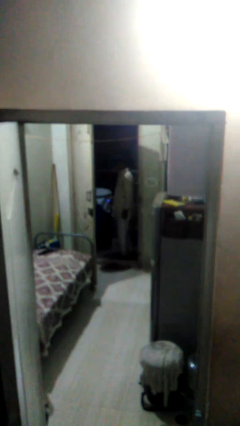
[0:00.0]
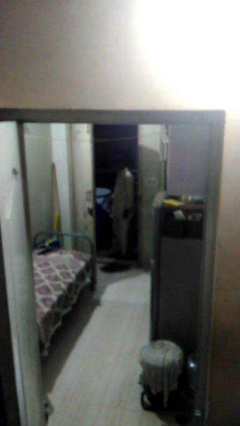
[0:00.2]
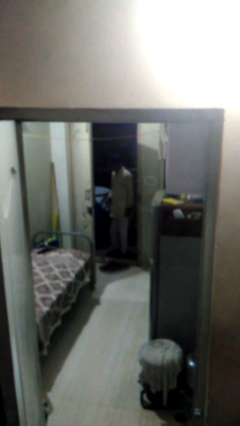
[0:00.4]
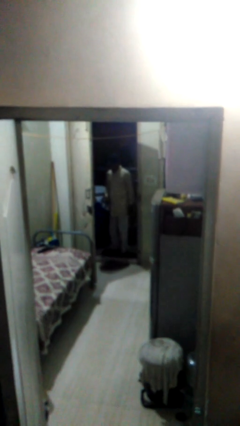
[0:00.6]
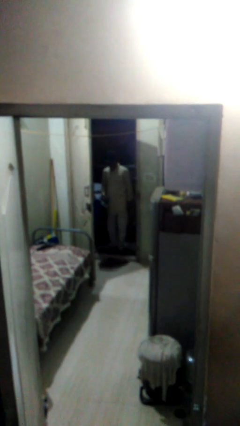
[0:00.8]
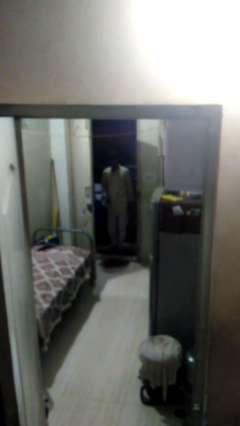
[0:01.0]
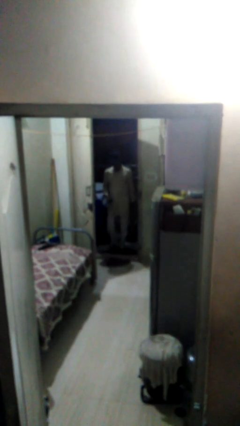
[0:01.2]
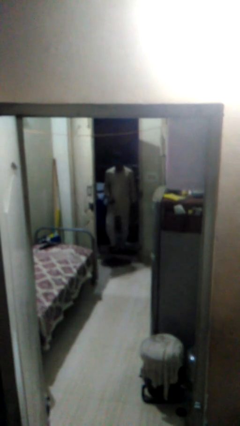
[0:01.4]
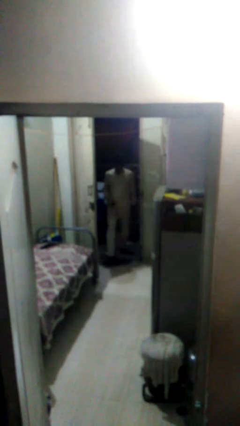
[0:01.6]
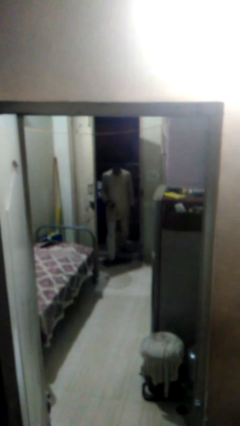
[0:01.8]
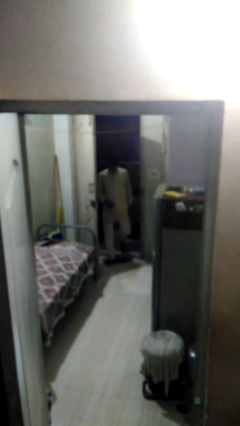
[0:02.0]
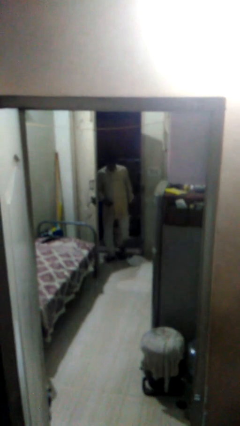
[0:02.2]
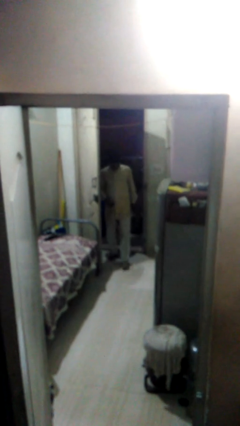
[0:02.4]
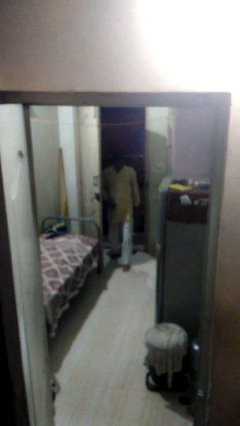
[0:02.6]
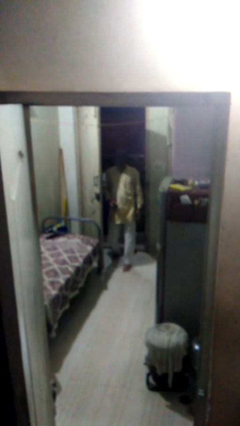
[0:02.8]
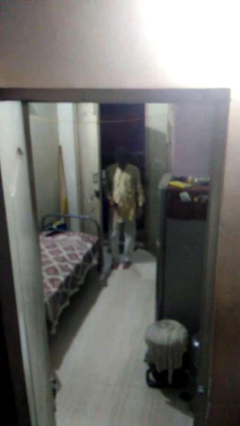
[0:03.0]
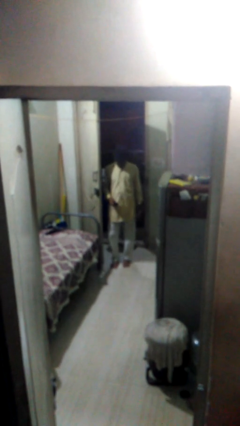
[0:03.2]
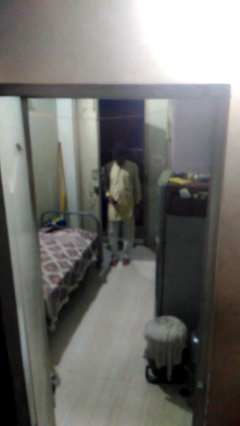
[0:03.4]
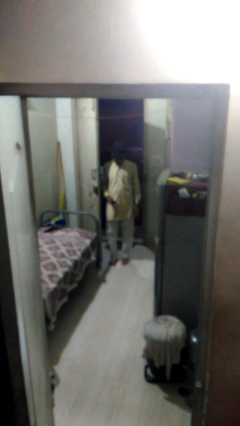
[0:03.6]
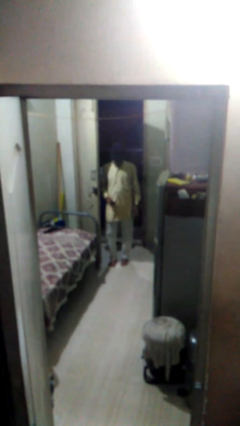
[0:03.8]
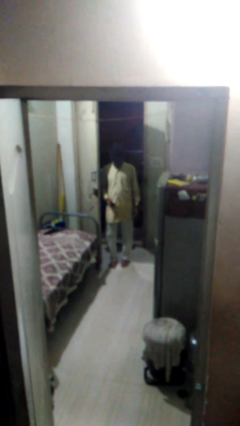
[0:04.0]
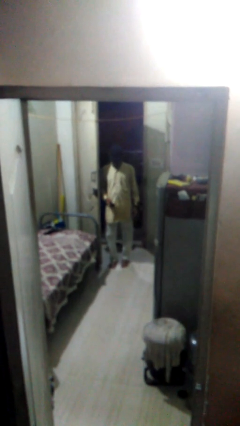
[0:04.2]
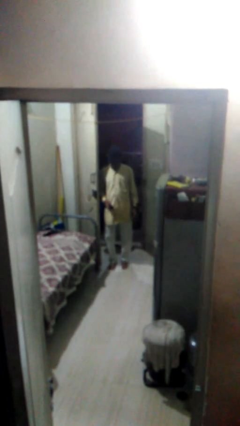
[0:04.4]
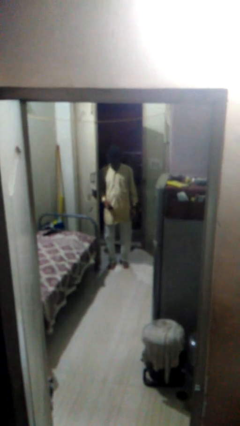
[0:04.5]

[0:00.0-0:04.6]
person enters scene through structure

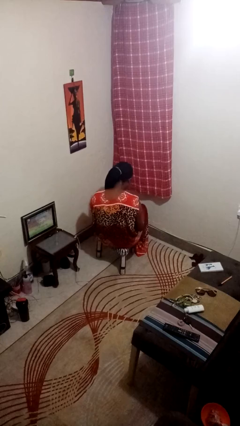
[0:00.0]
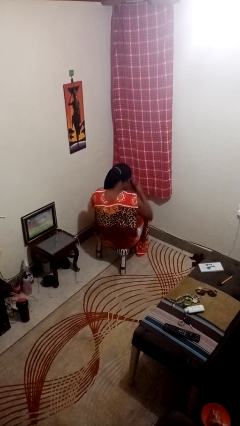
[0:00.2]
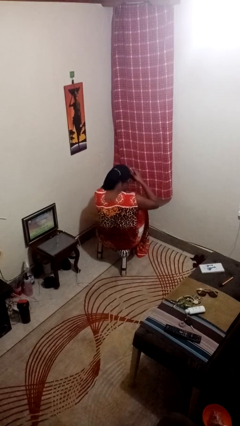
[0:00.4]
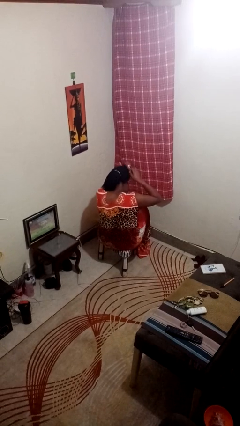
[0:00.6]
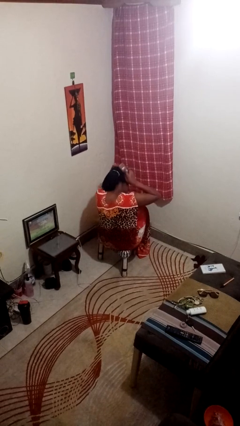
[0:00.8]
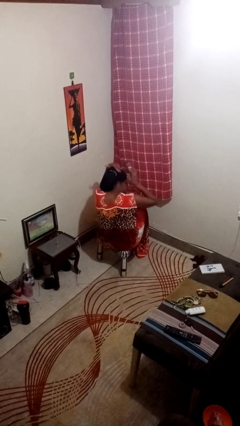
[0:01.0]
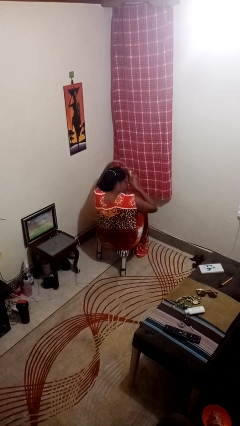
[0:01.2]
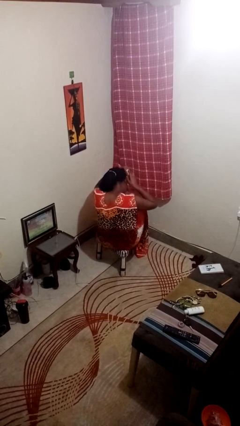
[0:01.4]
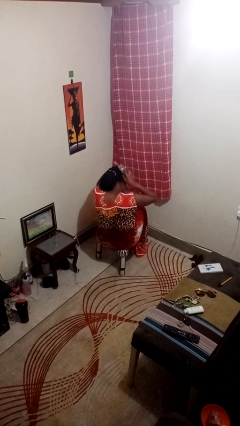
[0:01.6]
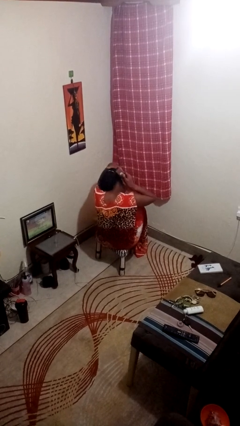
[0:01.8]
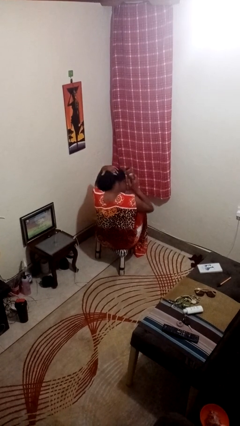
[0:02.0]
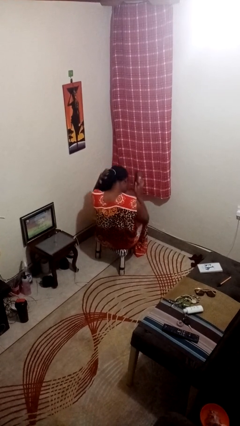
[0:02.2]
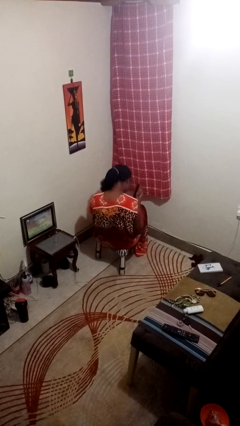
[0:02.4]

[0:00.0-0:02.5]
person brushes hair

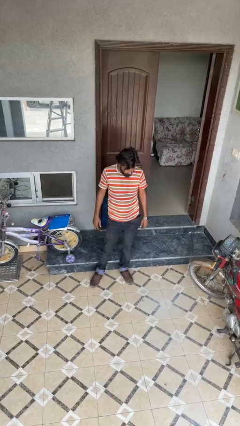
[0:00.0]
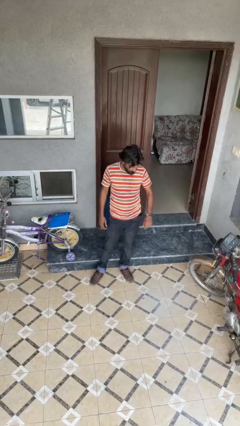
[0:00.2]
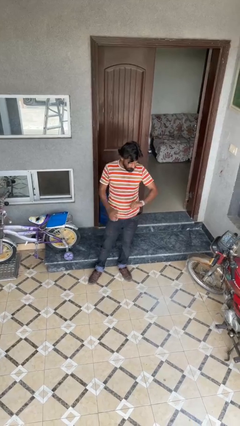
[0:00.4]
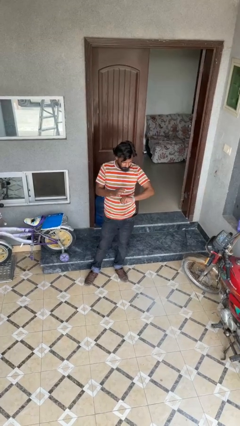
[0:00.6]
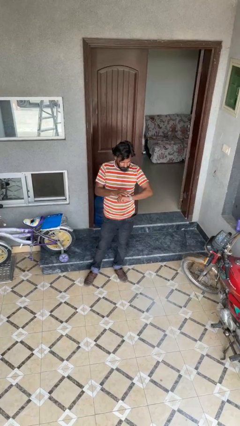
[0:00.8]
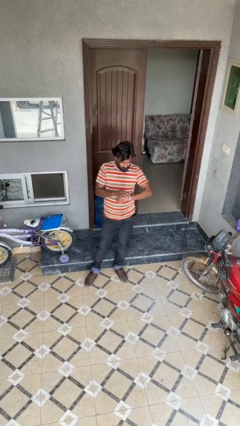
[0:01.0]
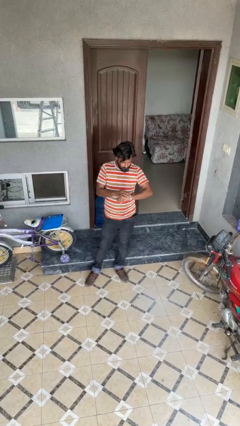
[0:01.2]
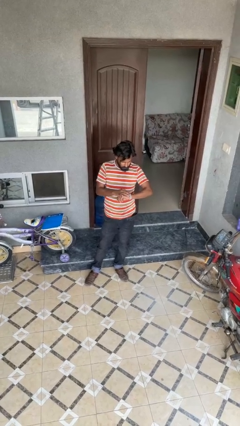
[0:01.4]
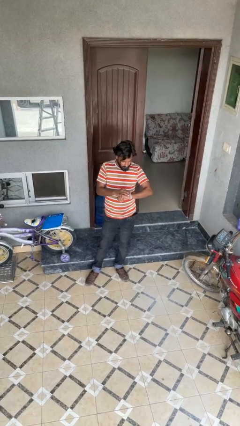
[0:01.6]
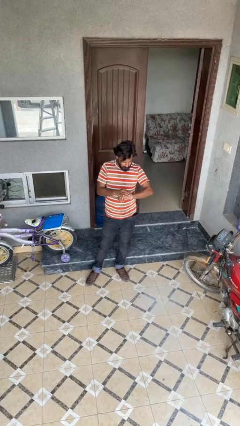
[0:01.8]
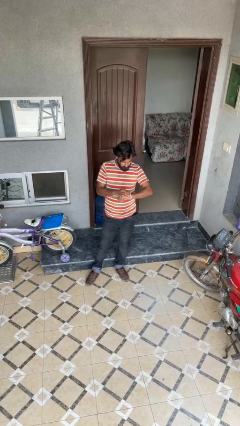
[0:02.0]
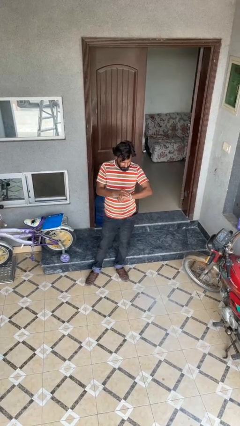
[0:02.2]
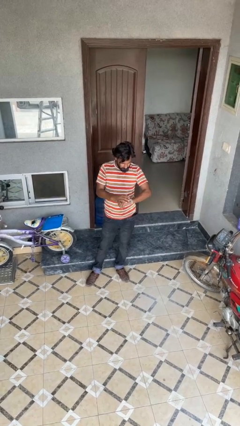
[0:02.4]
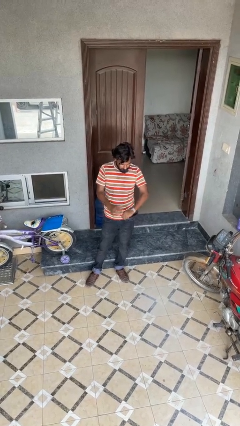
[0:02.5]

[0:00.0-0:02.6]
person looks at wristwatch

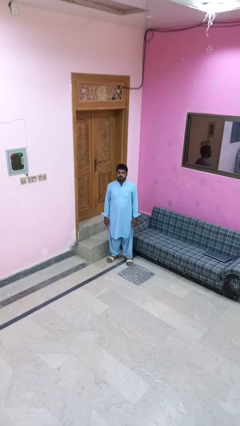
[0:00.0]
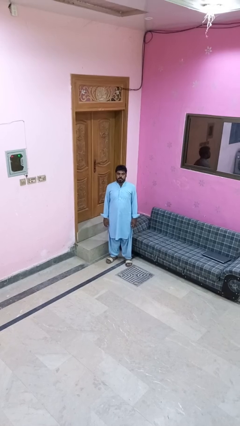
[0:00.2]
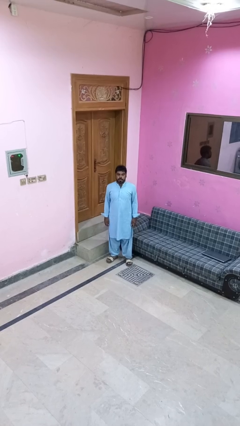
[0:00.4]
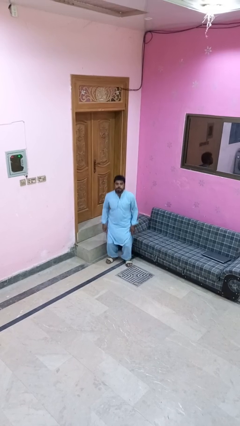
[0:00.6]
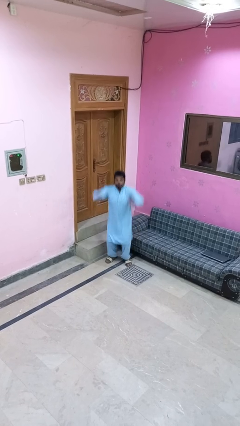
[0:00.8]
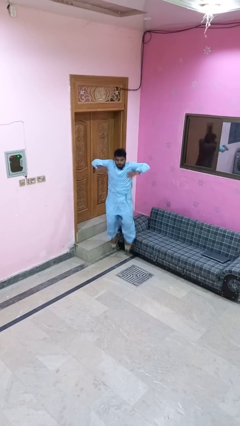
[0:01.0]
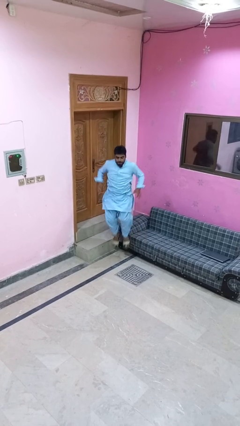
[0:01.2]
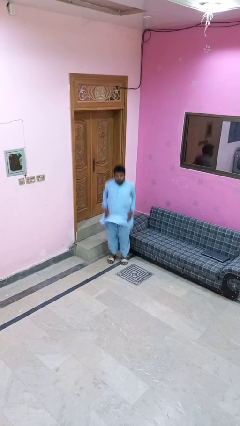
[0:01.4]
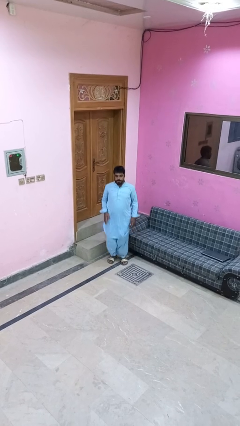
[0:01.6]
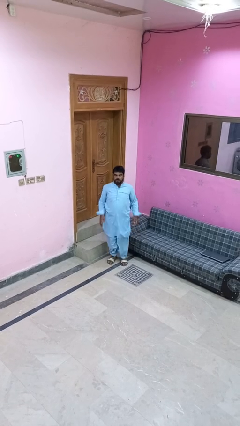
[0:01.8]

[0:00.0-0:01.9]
person jumps

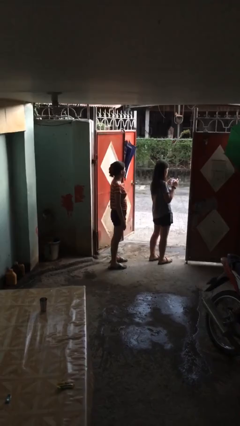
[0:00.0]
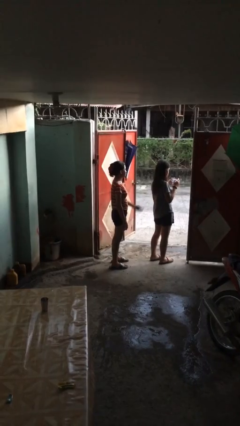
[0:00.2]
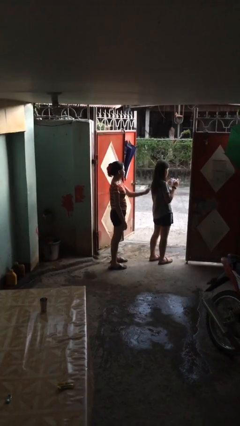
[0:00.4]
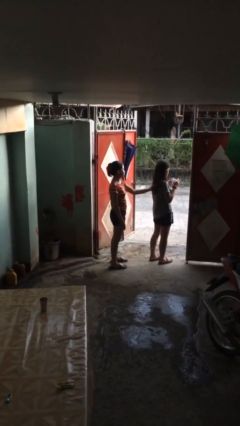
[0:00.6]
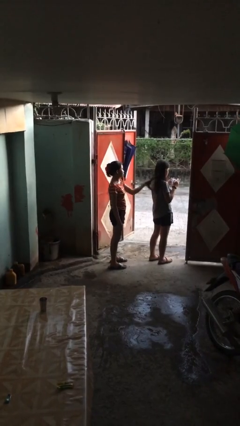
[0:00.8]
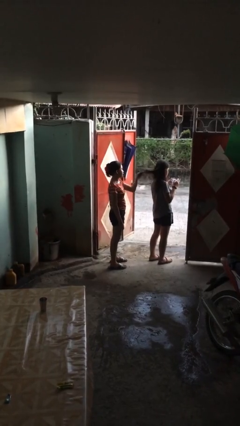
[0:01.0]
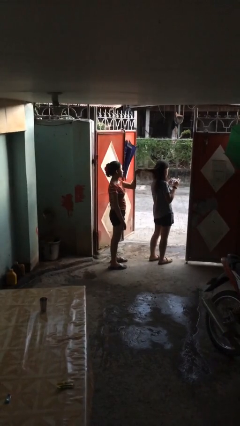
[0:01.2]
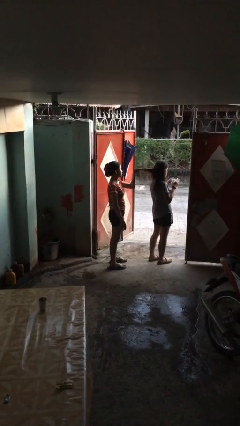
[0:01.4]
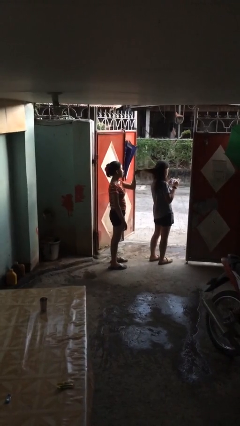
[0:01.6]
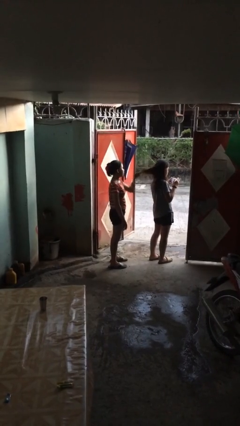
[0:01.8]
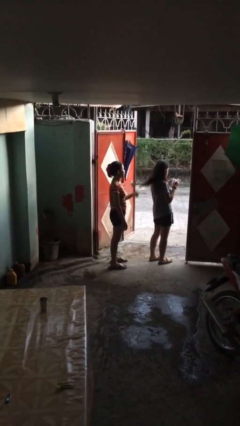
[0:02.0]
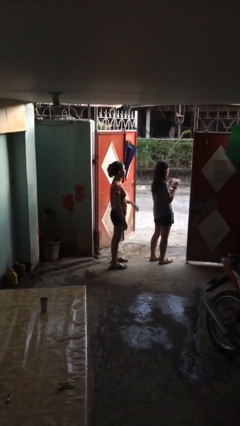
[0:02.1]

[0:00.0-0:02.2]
person grabs person by hair

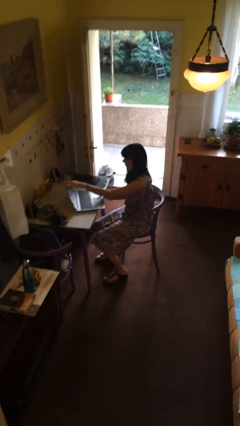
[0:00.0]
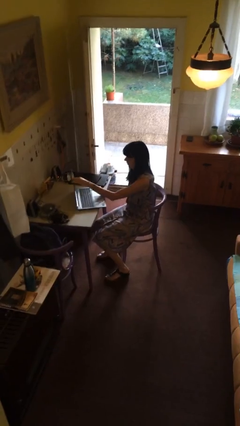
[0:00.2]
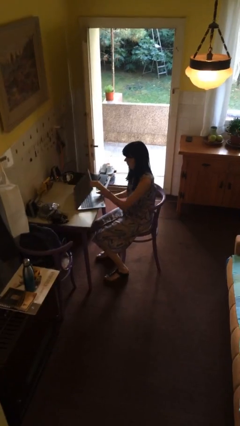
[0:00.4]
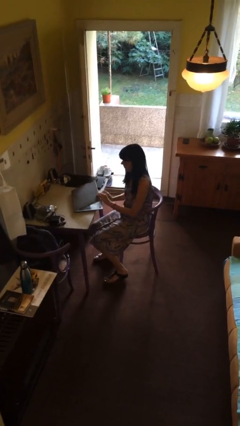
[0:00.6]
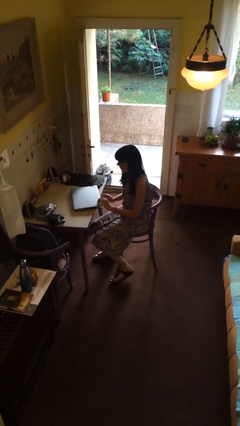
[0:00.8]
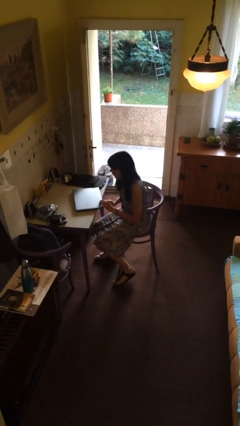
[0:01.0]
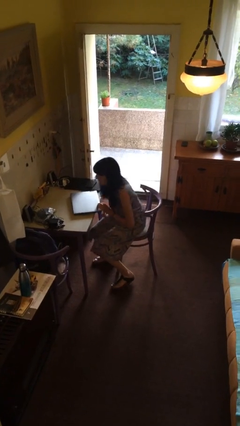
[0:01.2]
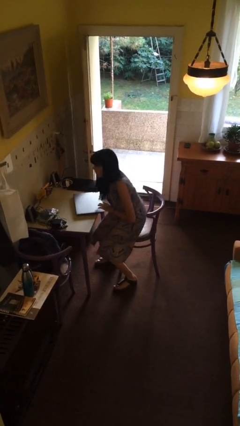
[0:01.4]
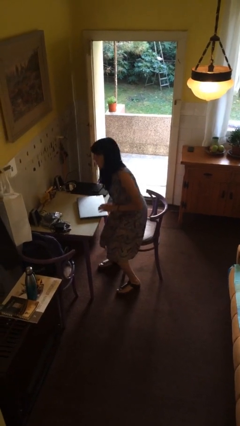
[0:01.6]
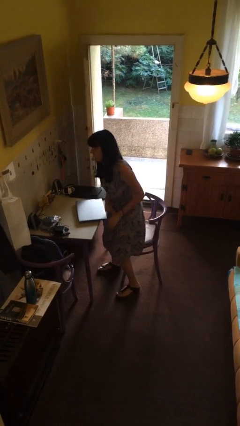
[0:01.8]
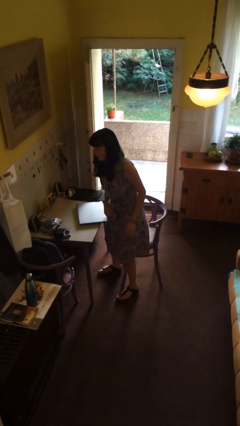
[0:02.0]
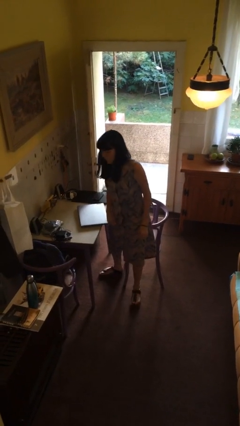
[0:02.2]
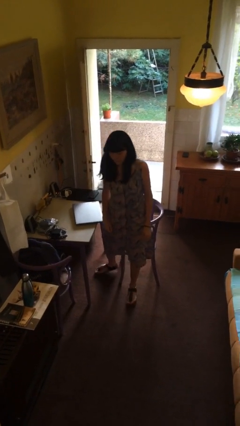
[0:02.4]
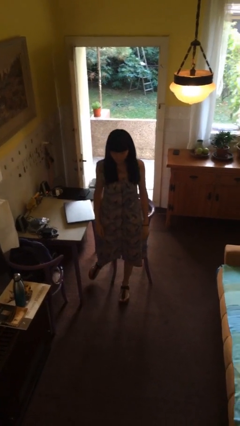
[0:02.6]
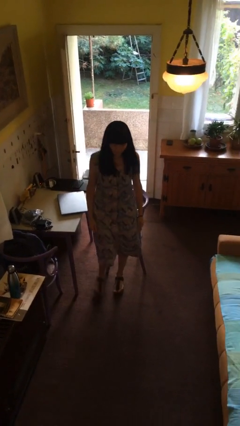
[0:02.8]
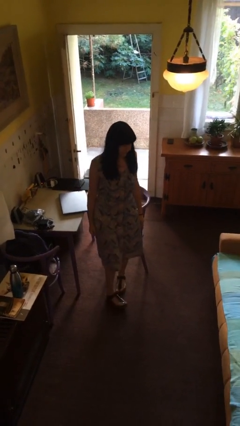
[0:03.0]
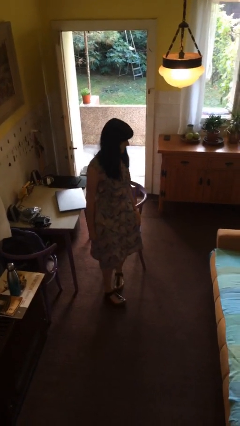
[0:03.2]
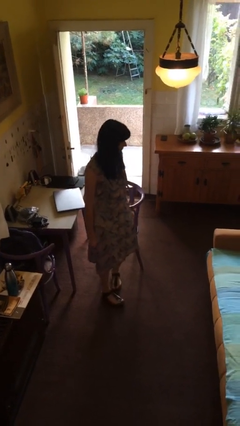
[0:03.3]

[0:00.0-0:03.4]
person stands up

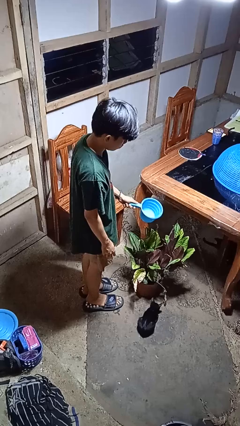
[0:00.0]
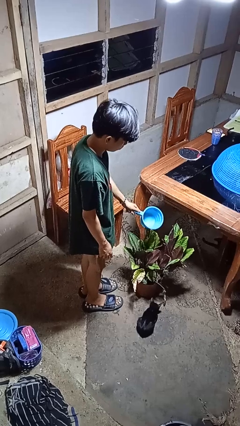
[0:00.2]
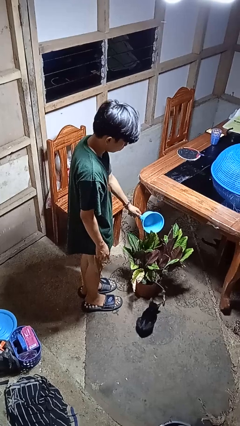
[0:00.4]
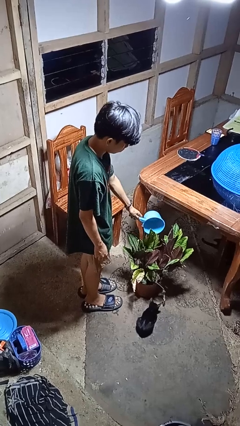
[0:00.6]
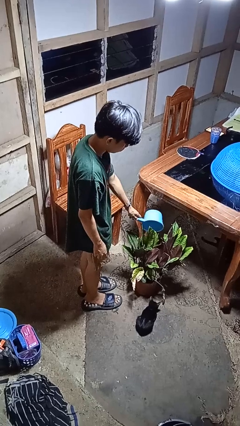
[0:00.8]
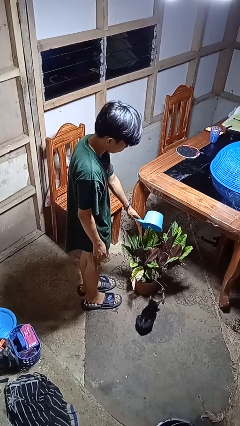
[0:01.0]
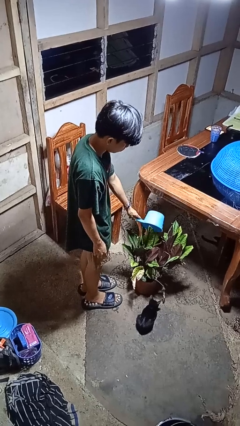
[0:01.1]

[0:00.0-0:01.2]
person waters houseplant
